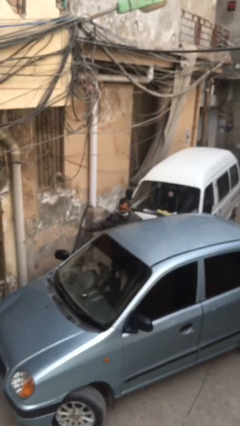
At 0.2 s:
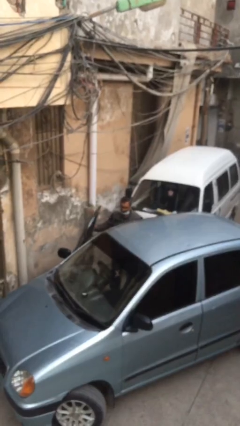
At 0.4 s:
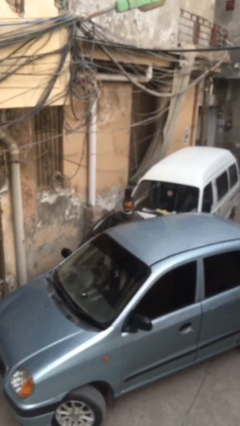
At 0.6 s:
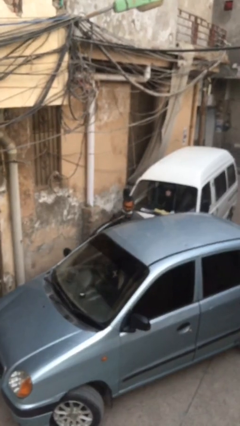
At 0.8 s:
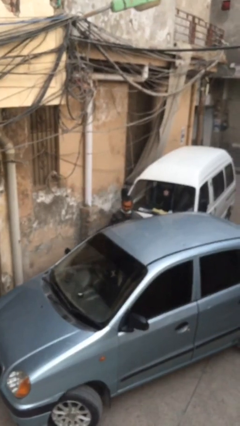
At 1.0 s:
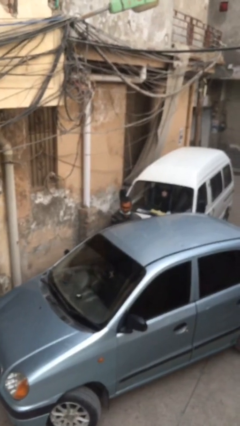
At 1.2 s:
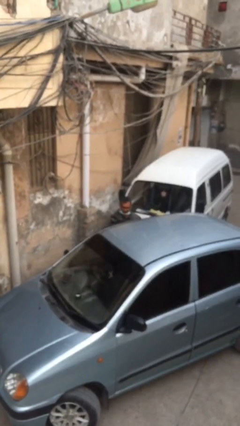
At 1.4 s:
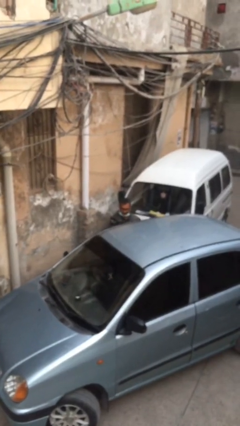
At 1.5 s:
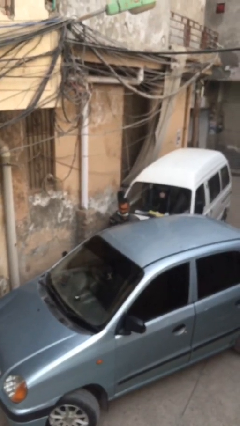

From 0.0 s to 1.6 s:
person closes car door

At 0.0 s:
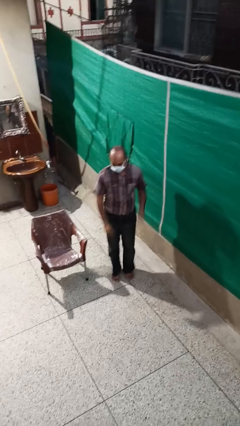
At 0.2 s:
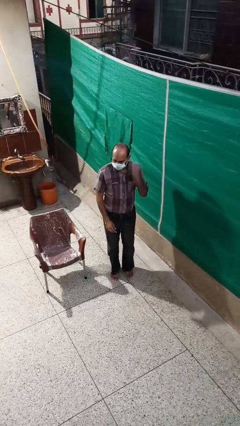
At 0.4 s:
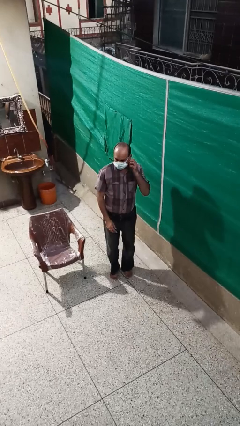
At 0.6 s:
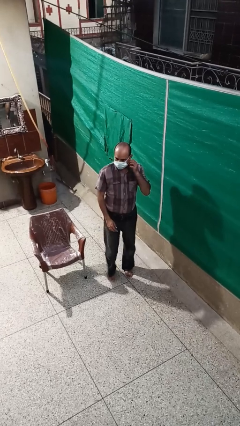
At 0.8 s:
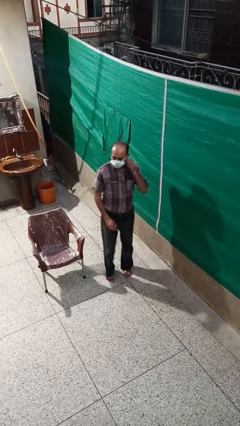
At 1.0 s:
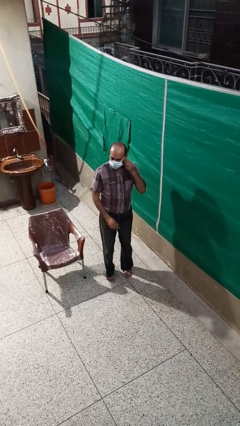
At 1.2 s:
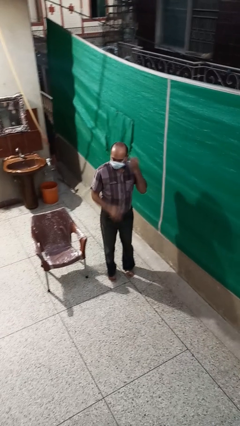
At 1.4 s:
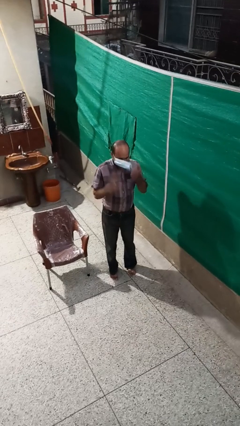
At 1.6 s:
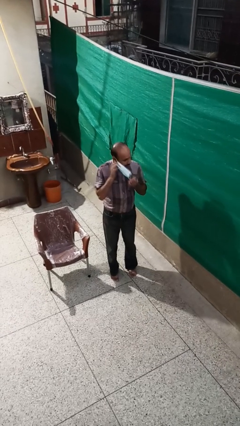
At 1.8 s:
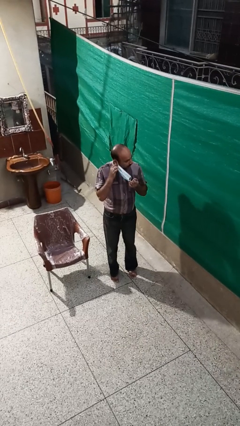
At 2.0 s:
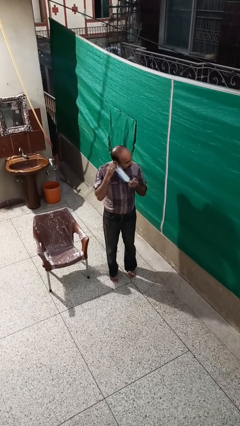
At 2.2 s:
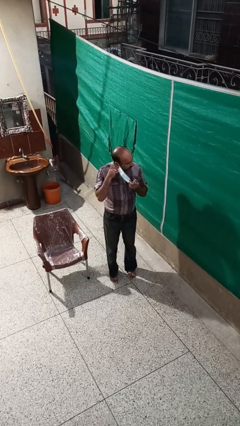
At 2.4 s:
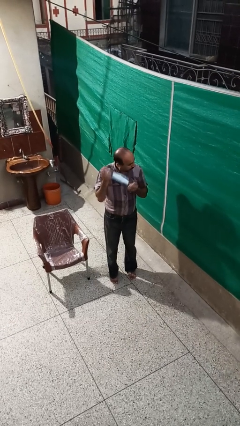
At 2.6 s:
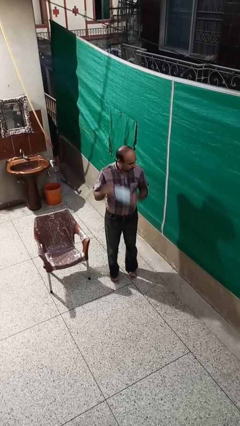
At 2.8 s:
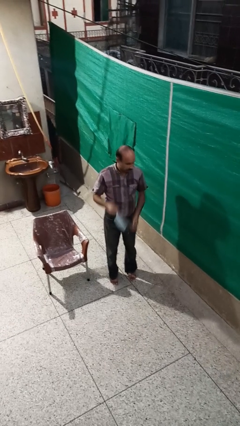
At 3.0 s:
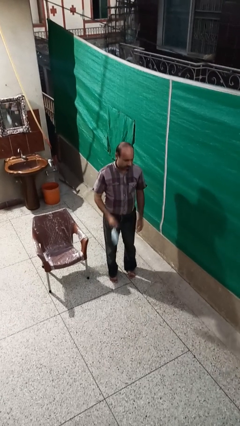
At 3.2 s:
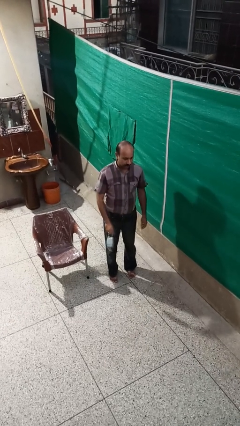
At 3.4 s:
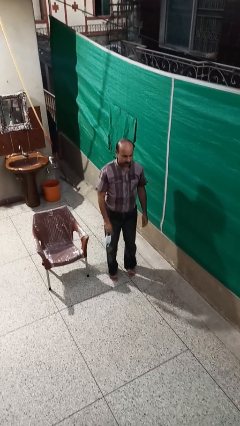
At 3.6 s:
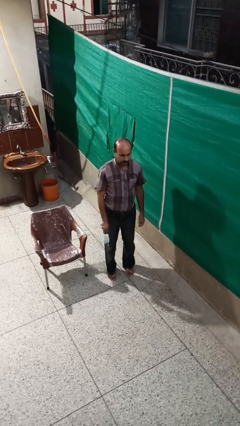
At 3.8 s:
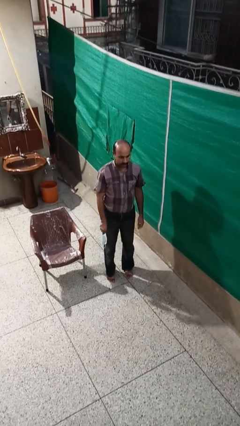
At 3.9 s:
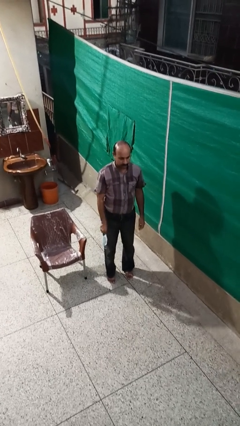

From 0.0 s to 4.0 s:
person takes off facemask

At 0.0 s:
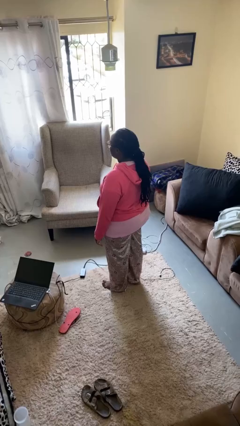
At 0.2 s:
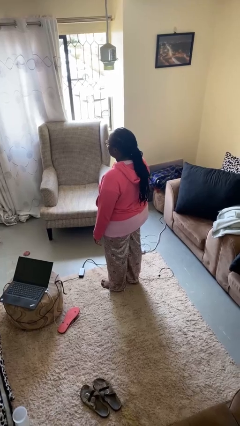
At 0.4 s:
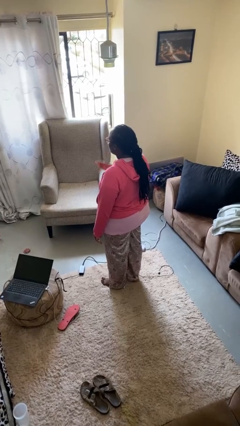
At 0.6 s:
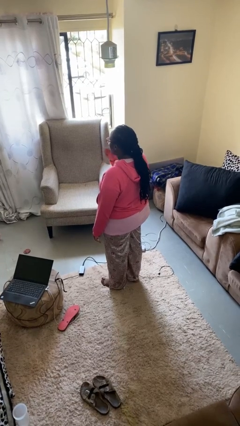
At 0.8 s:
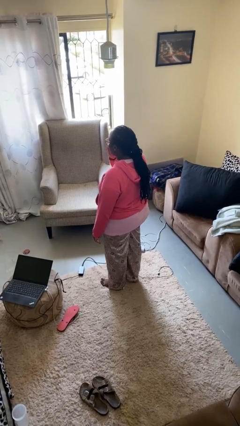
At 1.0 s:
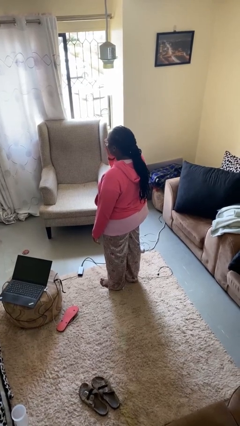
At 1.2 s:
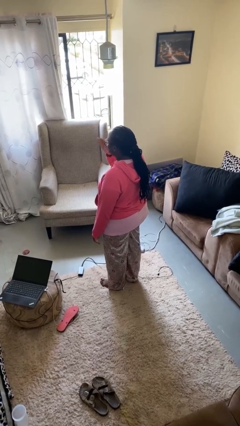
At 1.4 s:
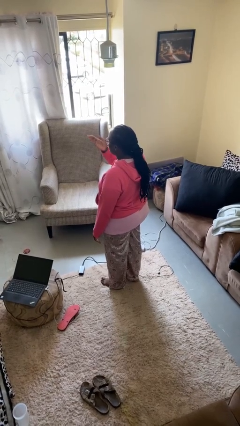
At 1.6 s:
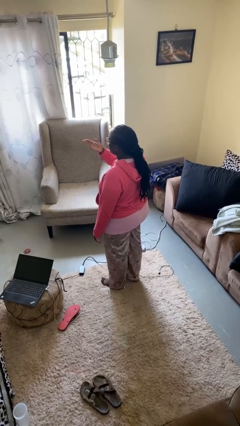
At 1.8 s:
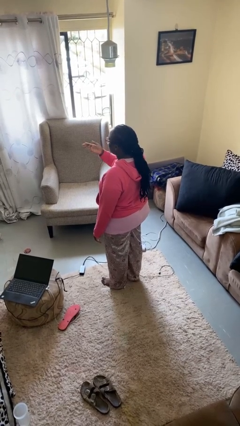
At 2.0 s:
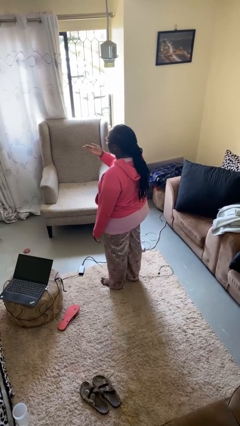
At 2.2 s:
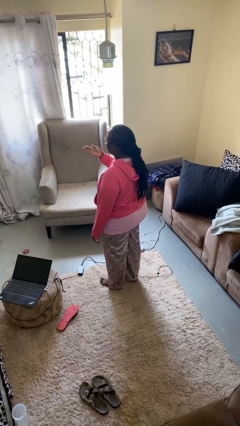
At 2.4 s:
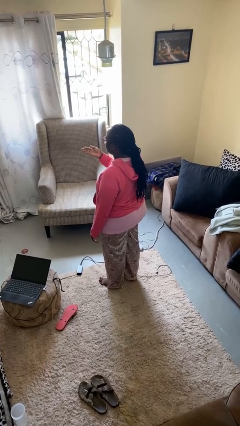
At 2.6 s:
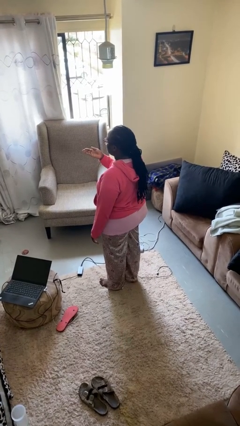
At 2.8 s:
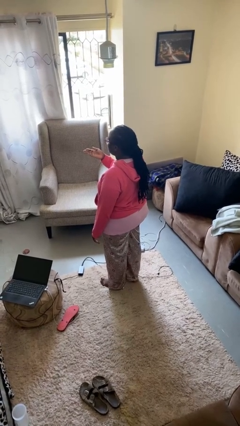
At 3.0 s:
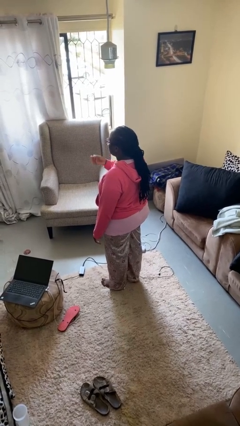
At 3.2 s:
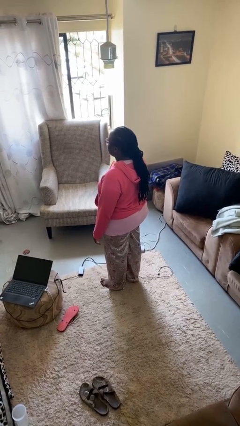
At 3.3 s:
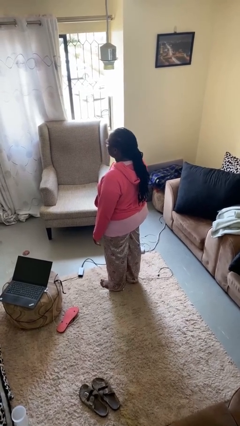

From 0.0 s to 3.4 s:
person gestures blow kiss

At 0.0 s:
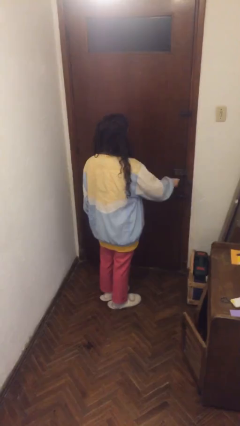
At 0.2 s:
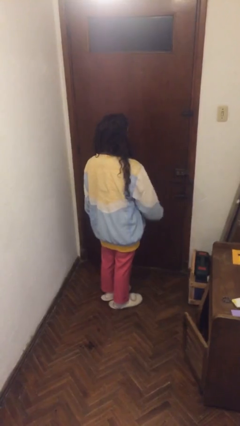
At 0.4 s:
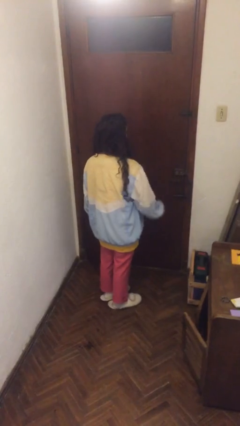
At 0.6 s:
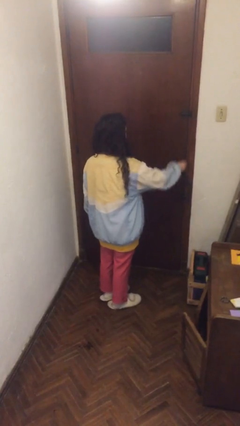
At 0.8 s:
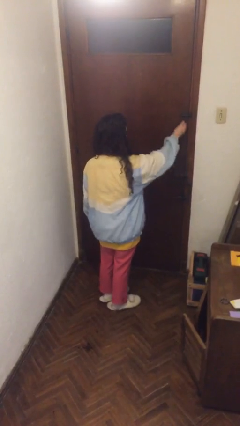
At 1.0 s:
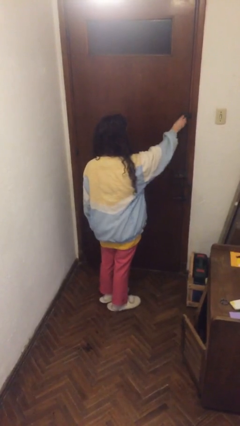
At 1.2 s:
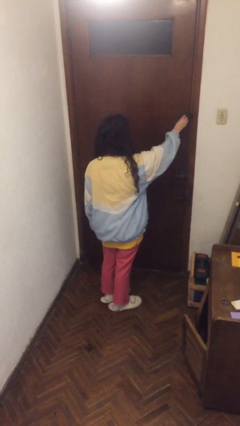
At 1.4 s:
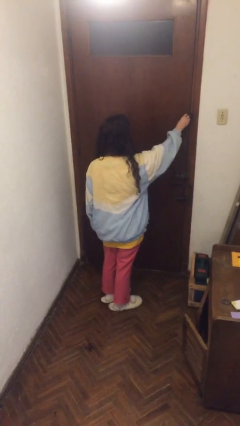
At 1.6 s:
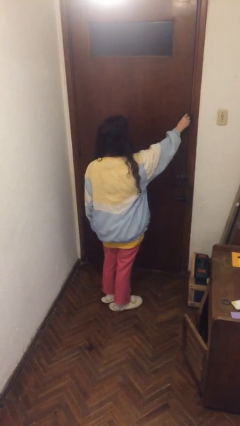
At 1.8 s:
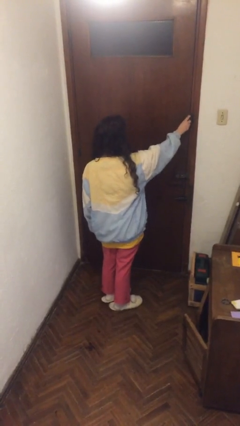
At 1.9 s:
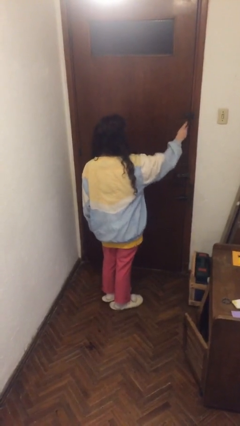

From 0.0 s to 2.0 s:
person locks door with keys

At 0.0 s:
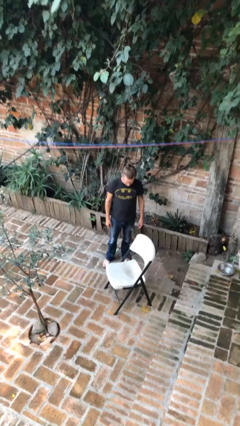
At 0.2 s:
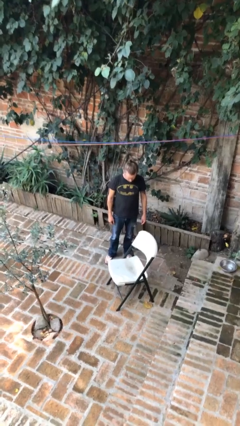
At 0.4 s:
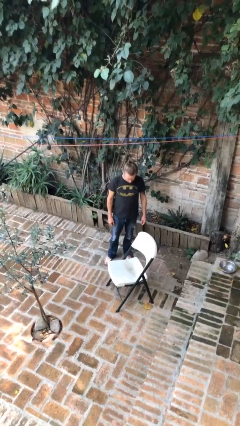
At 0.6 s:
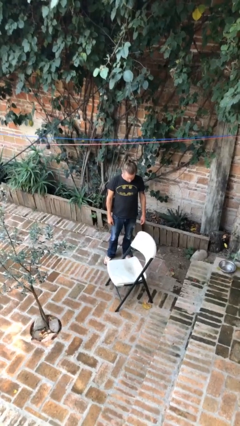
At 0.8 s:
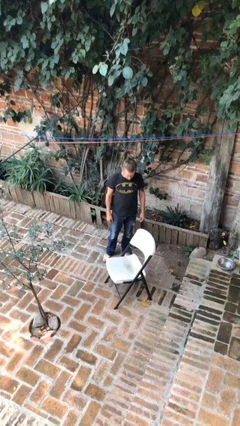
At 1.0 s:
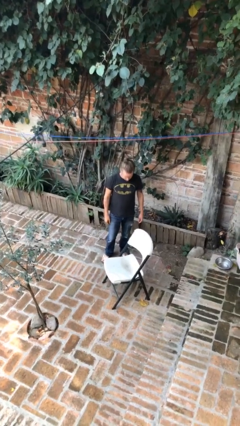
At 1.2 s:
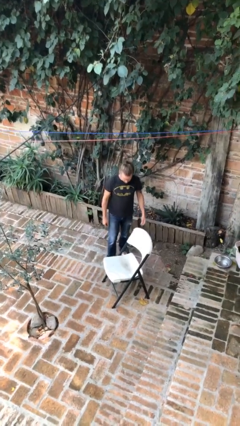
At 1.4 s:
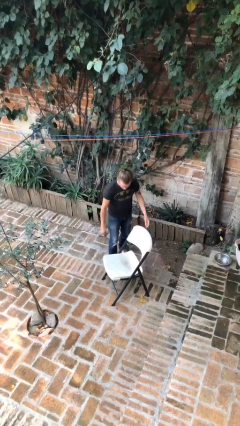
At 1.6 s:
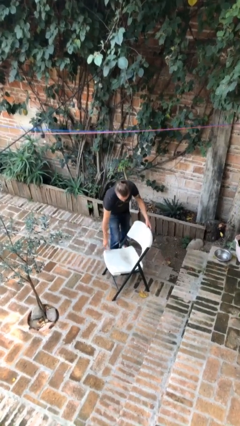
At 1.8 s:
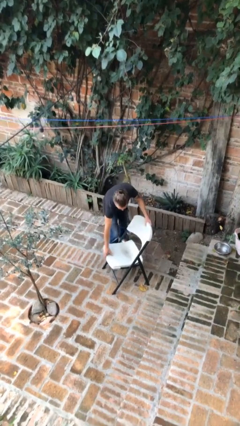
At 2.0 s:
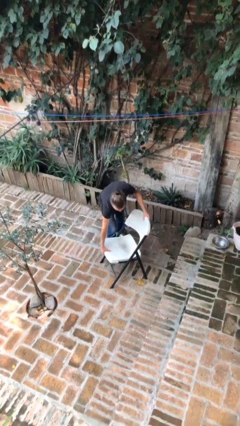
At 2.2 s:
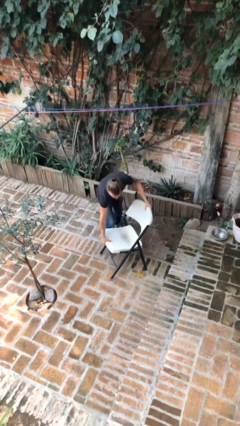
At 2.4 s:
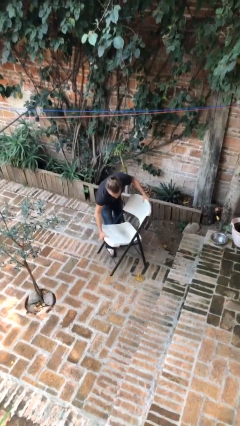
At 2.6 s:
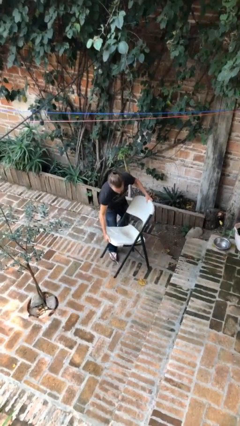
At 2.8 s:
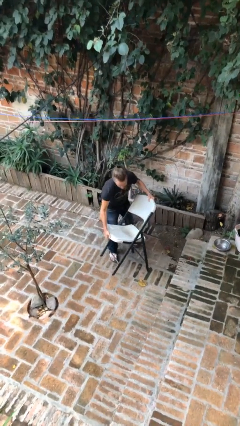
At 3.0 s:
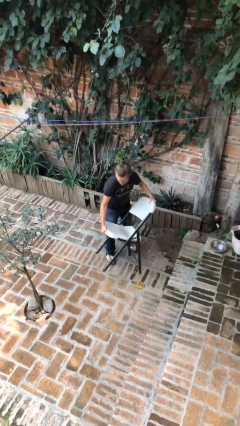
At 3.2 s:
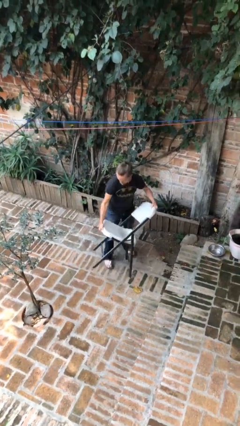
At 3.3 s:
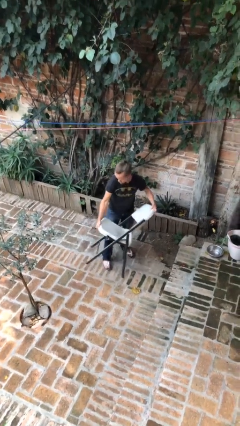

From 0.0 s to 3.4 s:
person picks up object from floor

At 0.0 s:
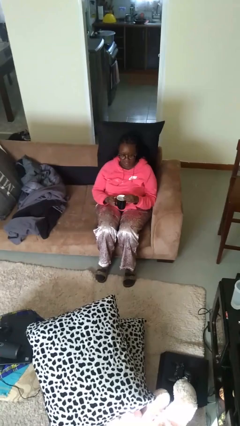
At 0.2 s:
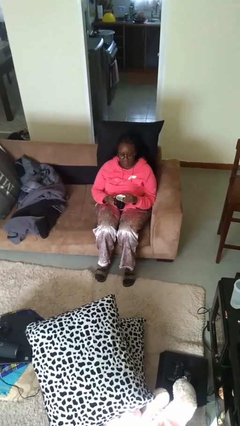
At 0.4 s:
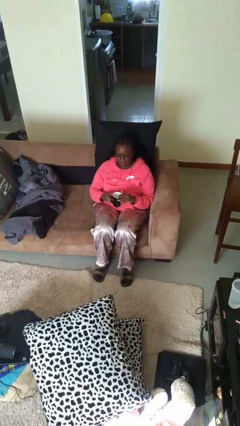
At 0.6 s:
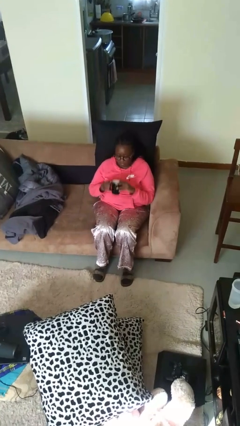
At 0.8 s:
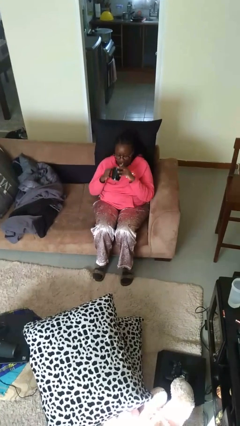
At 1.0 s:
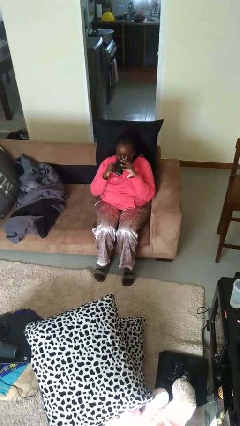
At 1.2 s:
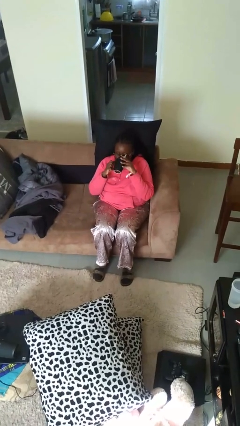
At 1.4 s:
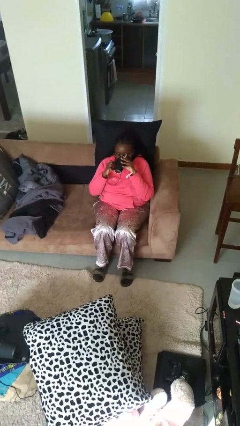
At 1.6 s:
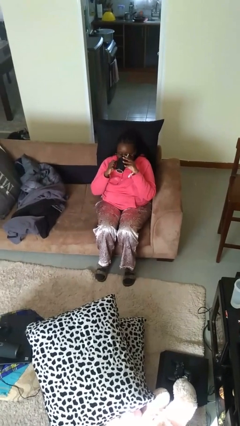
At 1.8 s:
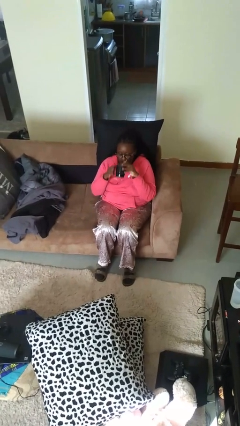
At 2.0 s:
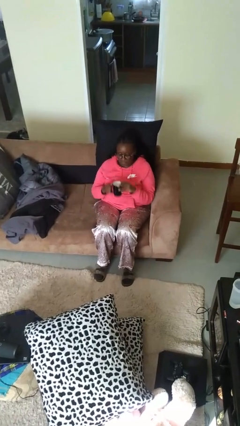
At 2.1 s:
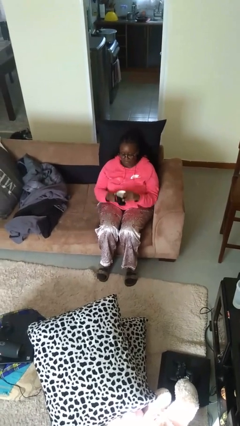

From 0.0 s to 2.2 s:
person drinks from mug

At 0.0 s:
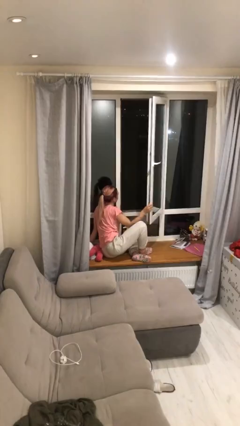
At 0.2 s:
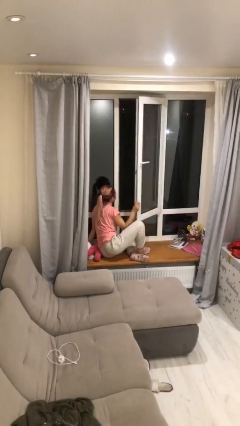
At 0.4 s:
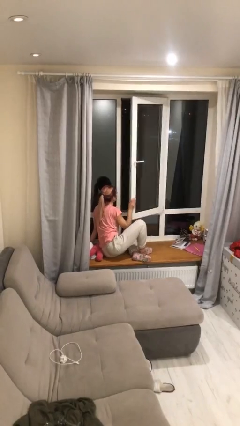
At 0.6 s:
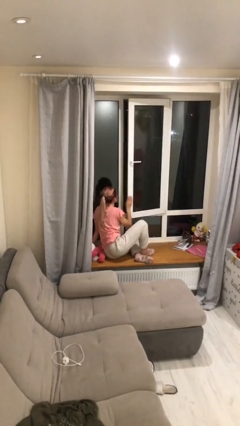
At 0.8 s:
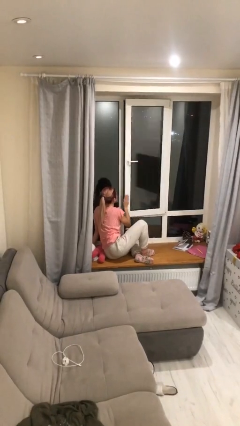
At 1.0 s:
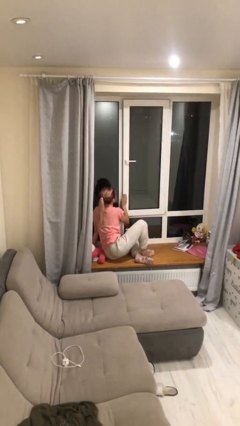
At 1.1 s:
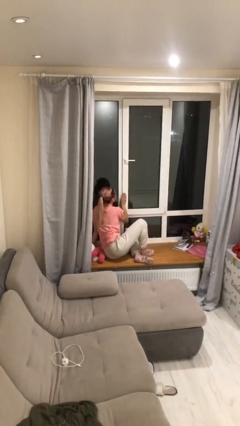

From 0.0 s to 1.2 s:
person closes home window
